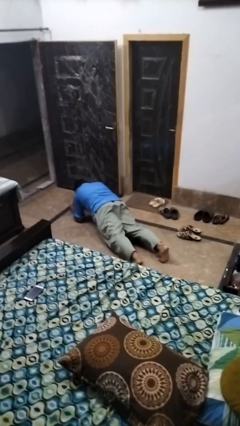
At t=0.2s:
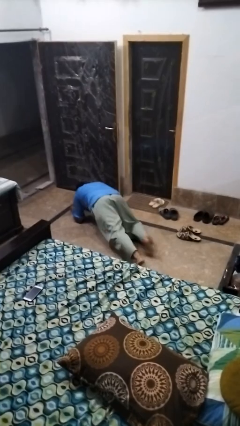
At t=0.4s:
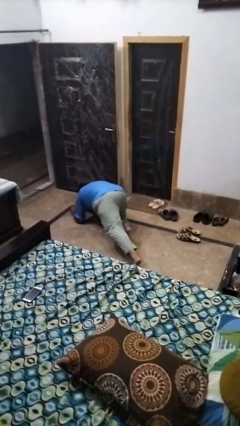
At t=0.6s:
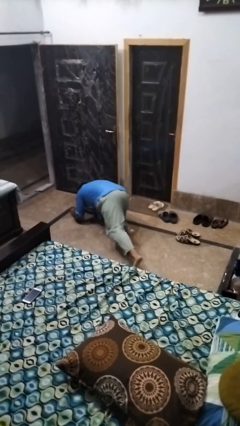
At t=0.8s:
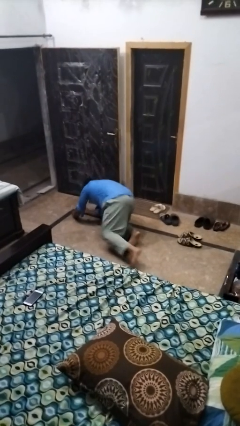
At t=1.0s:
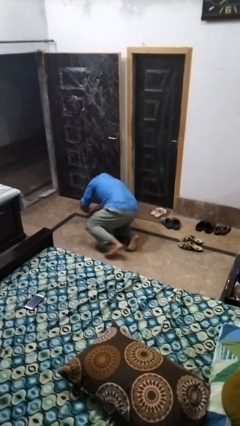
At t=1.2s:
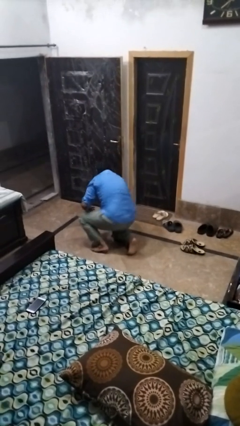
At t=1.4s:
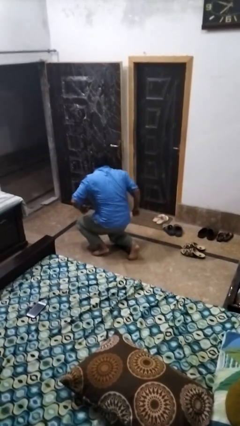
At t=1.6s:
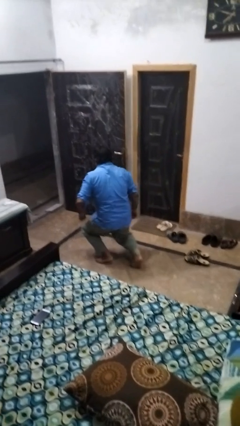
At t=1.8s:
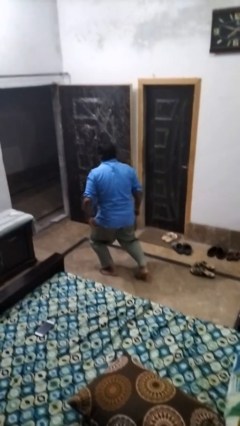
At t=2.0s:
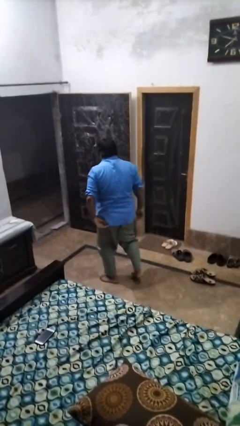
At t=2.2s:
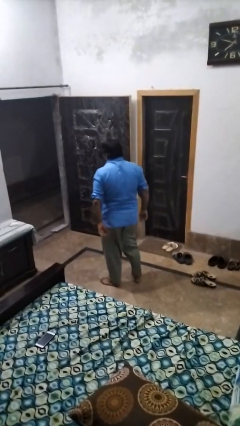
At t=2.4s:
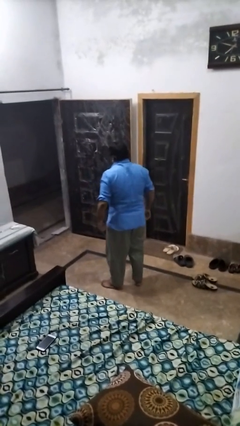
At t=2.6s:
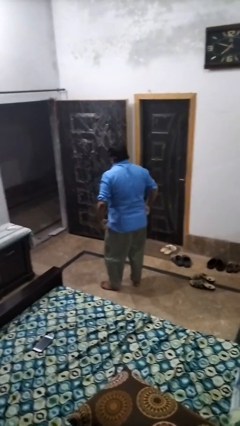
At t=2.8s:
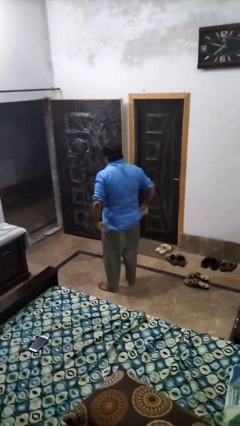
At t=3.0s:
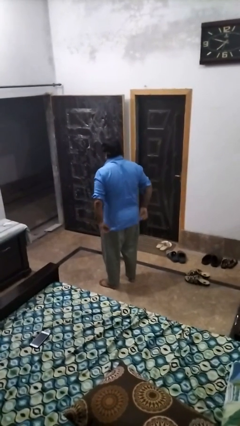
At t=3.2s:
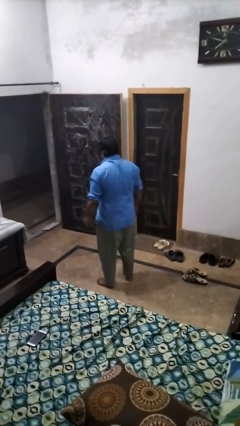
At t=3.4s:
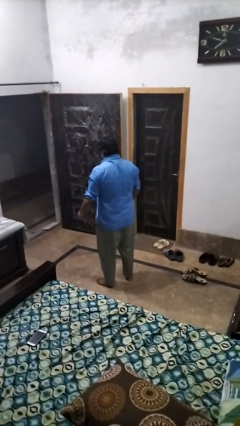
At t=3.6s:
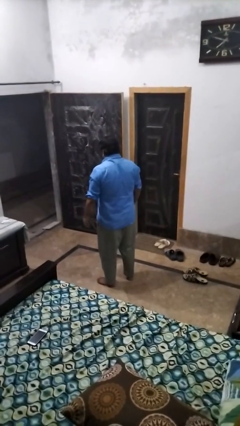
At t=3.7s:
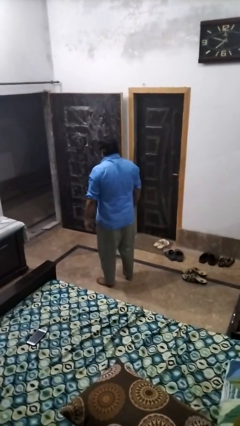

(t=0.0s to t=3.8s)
person stands up from floor

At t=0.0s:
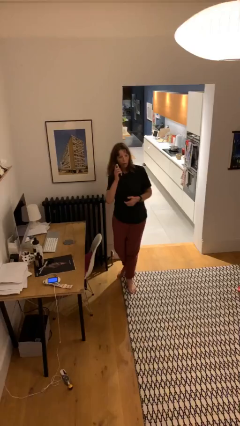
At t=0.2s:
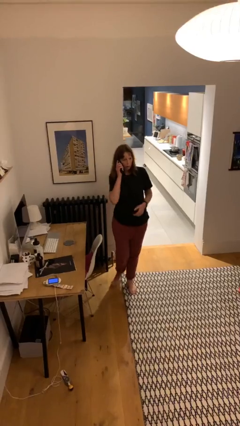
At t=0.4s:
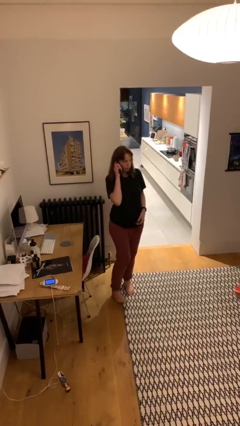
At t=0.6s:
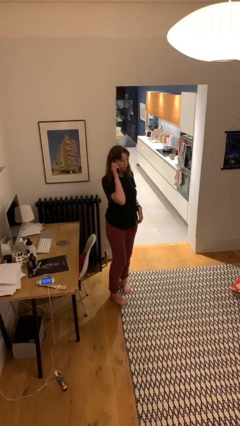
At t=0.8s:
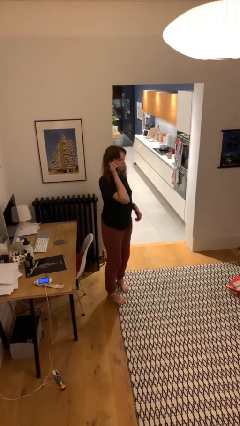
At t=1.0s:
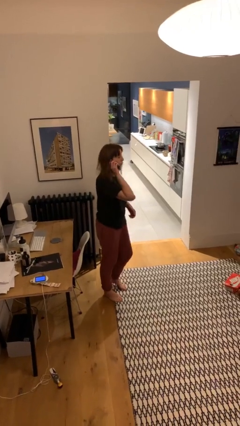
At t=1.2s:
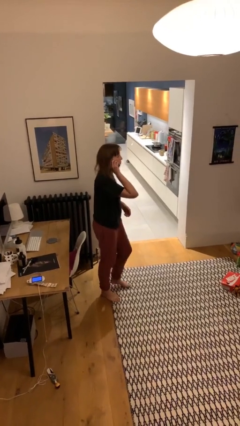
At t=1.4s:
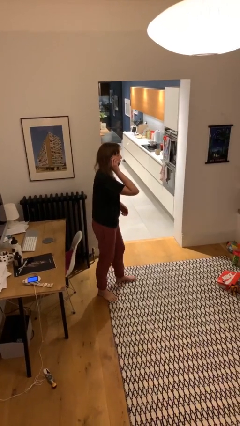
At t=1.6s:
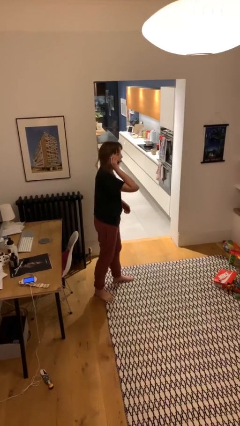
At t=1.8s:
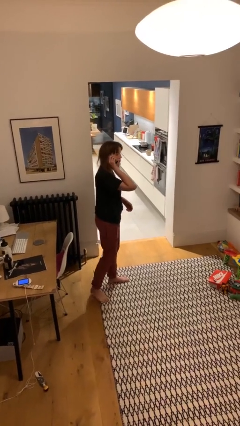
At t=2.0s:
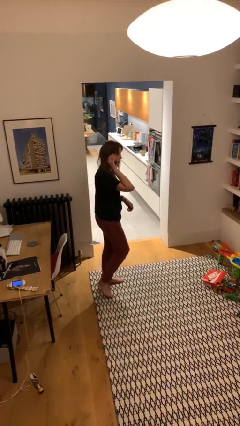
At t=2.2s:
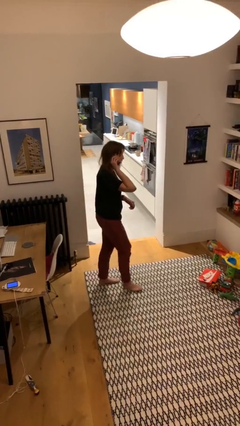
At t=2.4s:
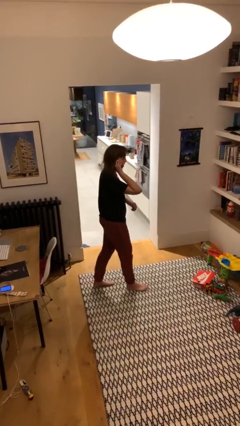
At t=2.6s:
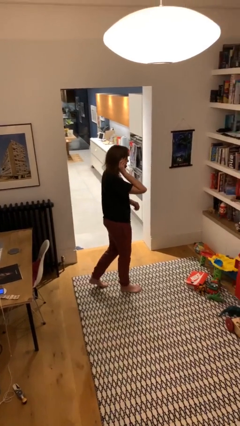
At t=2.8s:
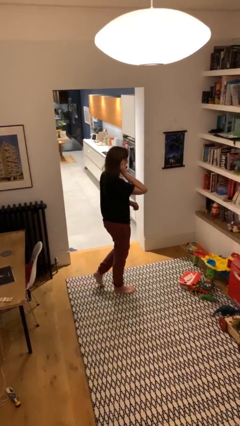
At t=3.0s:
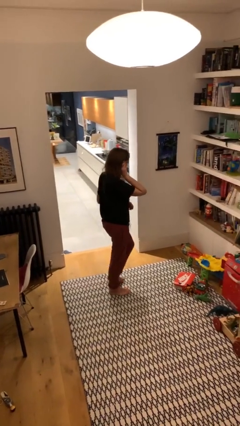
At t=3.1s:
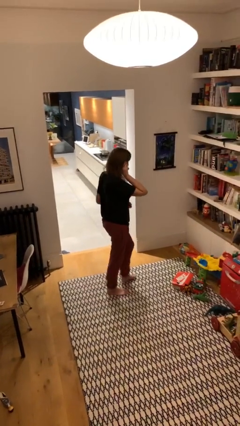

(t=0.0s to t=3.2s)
person talks on phone

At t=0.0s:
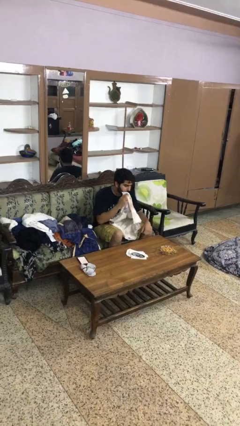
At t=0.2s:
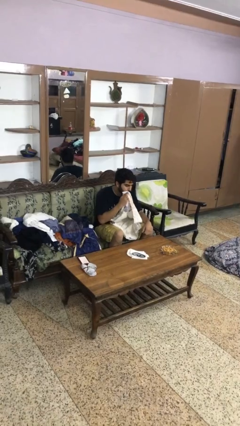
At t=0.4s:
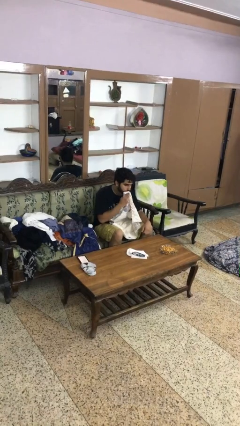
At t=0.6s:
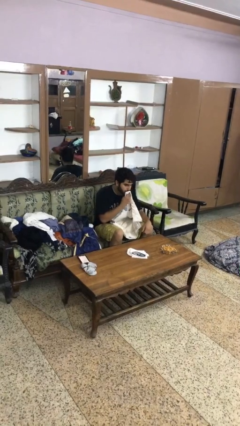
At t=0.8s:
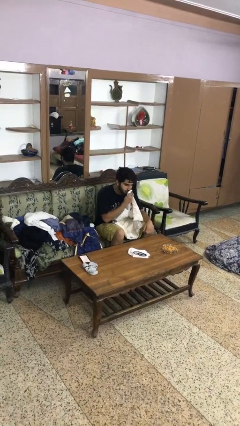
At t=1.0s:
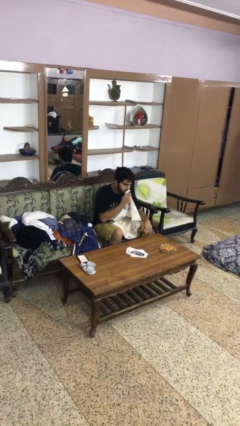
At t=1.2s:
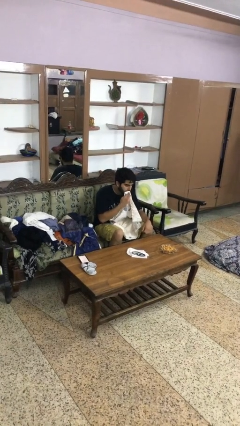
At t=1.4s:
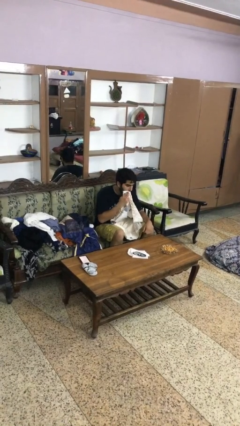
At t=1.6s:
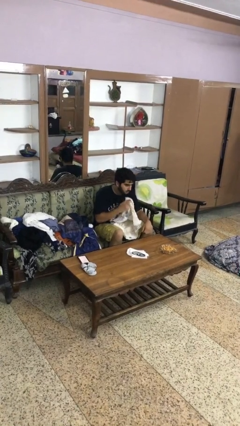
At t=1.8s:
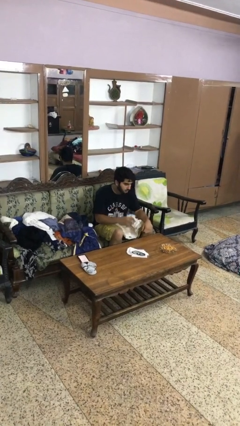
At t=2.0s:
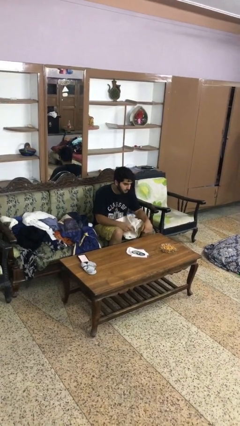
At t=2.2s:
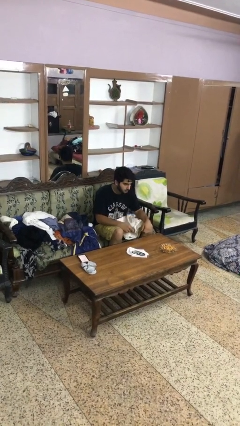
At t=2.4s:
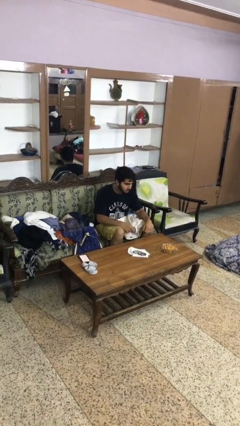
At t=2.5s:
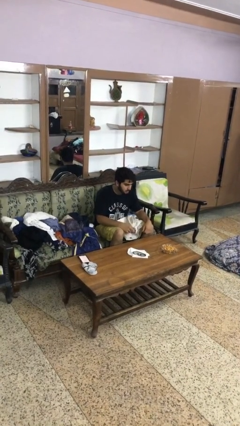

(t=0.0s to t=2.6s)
person wipes mouth with napkin

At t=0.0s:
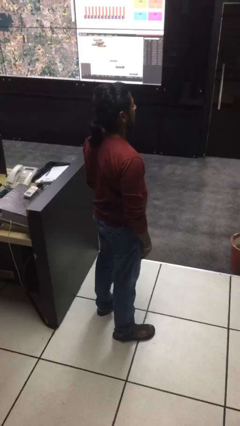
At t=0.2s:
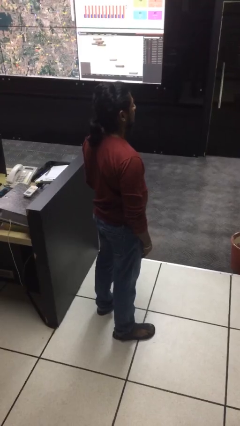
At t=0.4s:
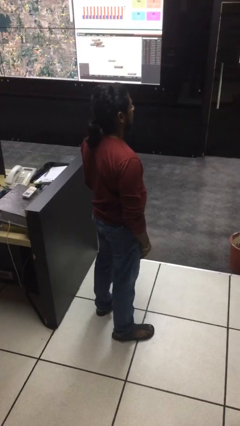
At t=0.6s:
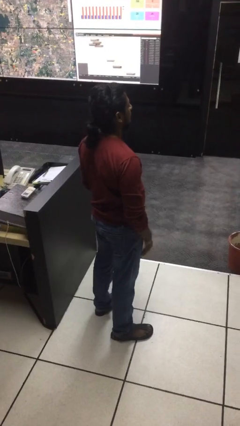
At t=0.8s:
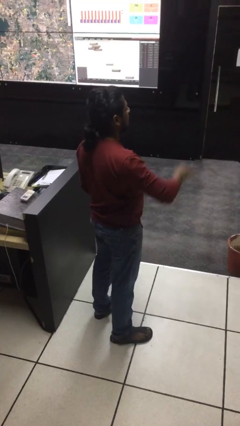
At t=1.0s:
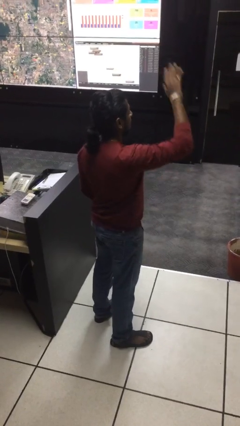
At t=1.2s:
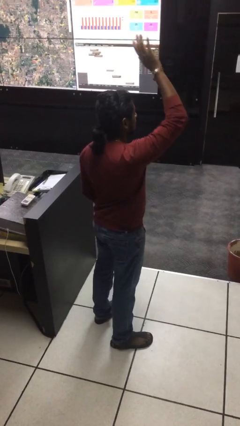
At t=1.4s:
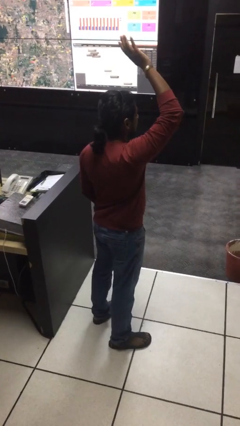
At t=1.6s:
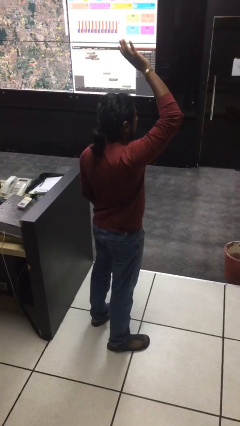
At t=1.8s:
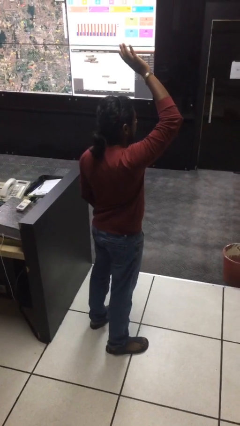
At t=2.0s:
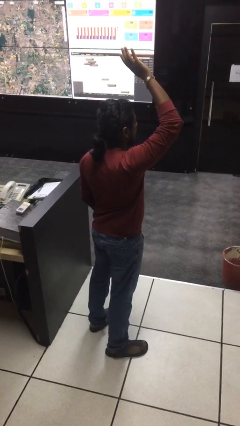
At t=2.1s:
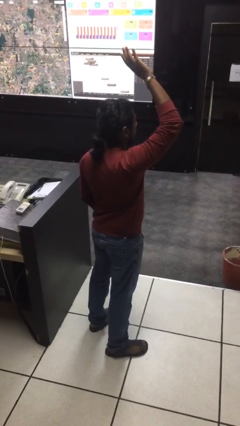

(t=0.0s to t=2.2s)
person gestures raise hand

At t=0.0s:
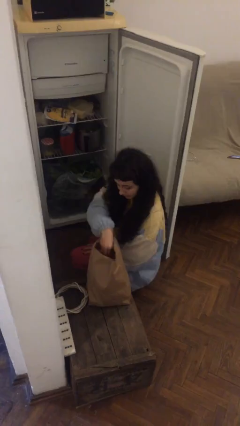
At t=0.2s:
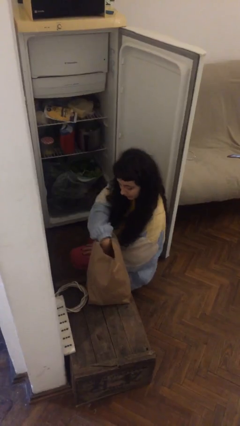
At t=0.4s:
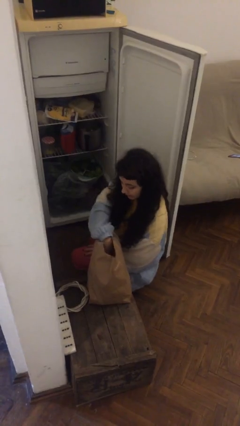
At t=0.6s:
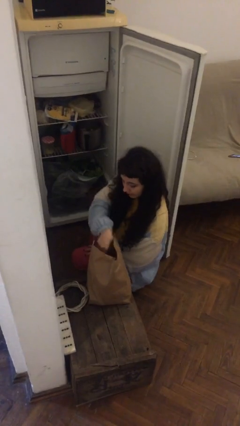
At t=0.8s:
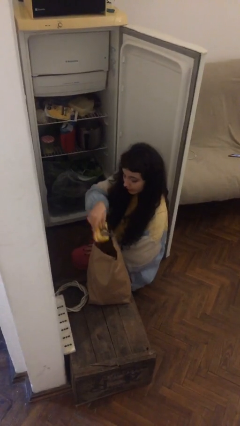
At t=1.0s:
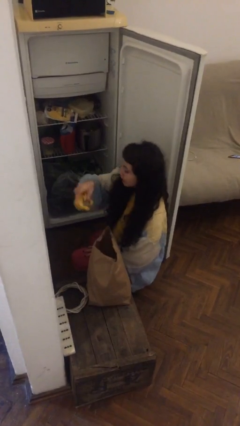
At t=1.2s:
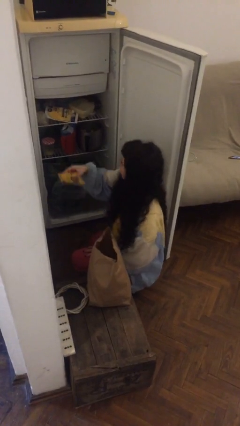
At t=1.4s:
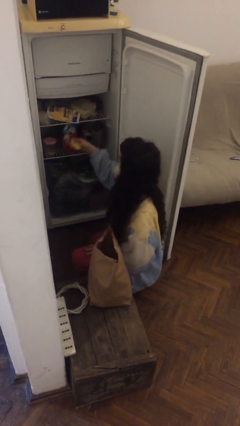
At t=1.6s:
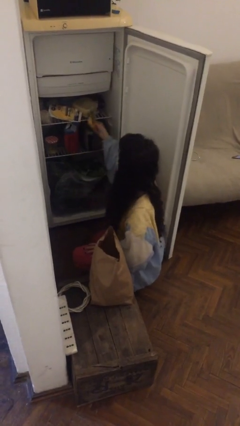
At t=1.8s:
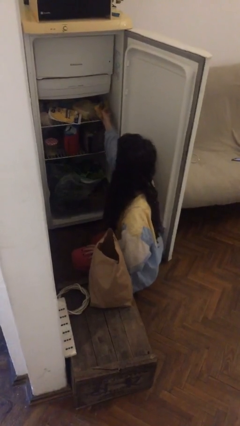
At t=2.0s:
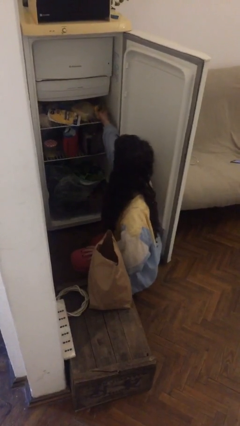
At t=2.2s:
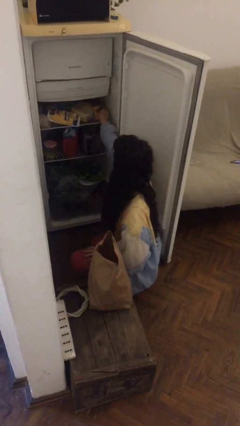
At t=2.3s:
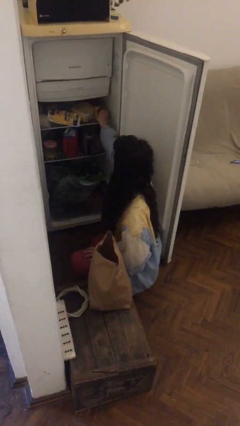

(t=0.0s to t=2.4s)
person loads groceries into refrigerator

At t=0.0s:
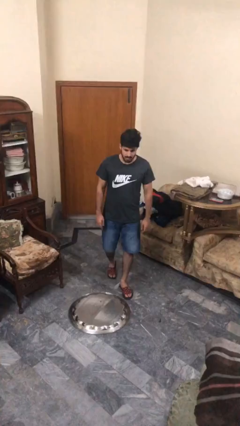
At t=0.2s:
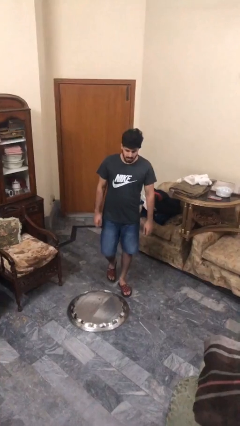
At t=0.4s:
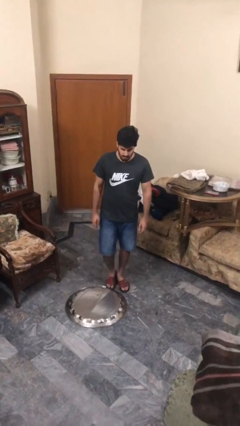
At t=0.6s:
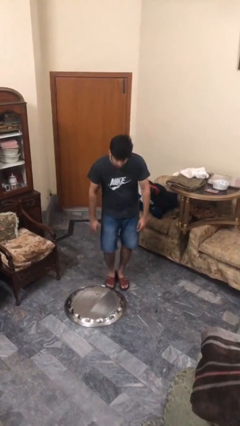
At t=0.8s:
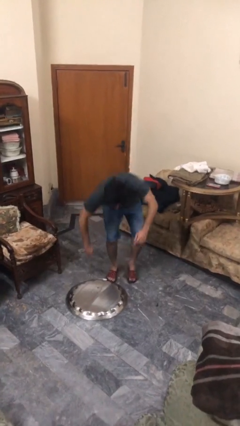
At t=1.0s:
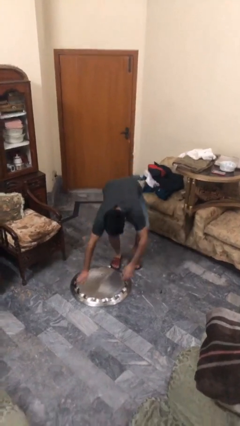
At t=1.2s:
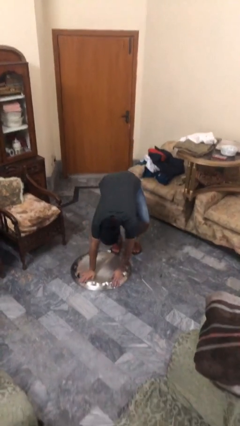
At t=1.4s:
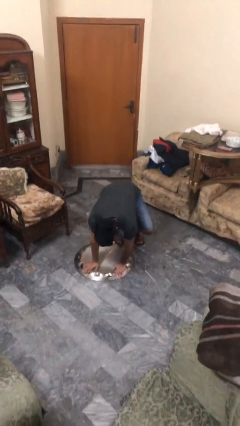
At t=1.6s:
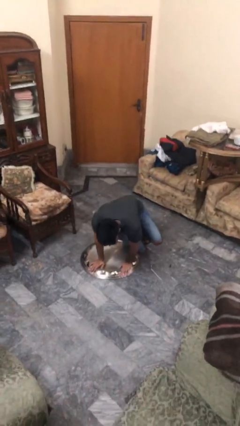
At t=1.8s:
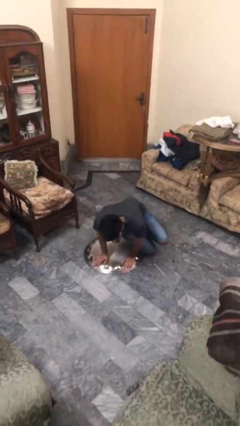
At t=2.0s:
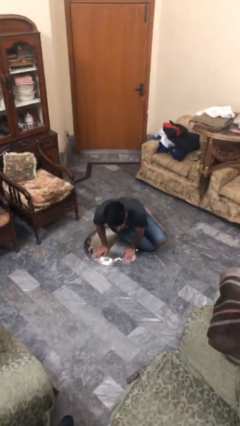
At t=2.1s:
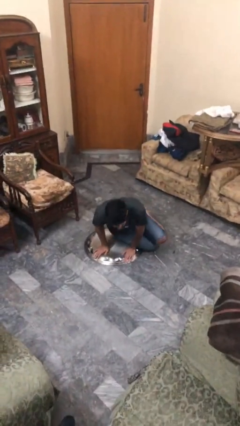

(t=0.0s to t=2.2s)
person trips on object on floor

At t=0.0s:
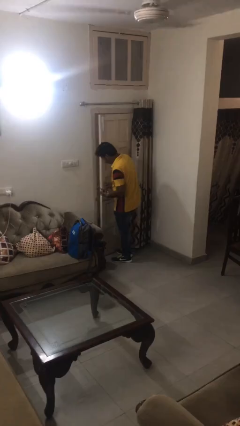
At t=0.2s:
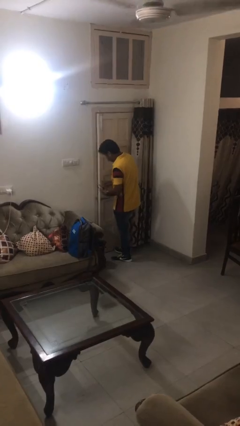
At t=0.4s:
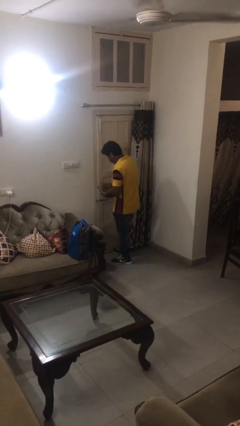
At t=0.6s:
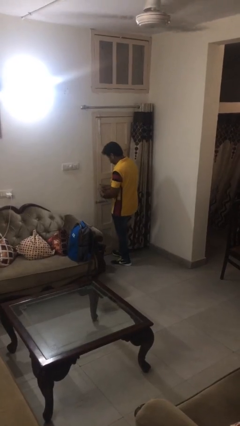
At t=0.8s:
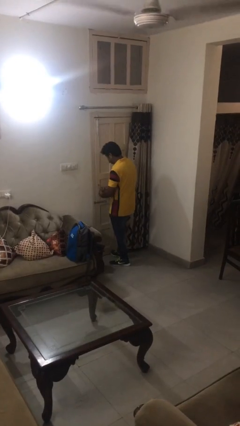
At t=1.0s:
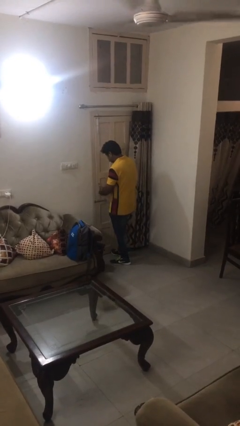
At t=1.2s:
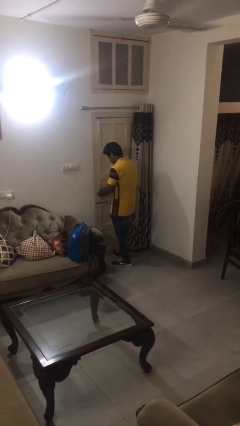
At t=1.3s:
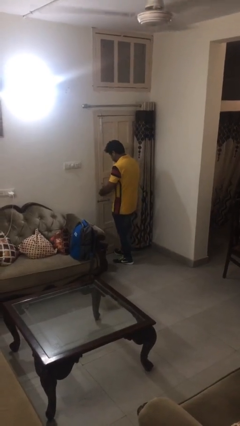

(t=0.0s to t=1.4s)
person closes facility door
